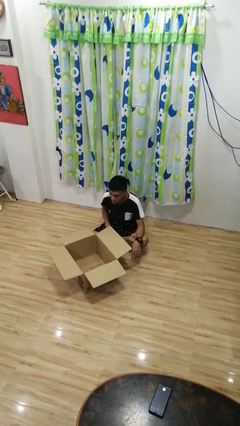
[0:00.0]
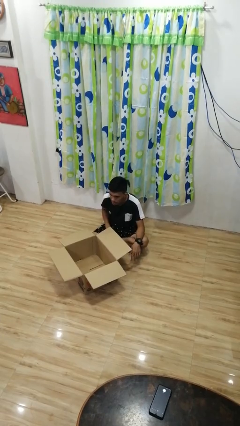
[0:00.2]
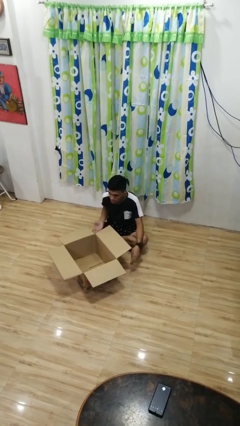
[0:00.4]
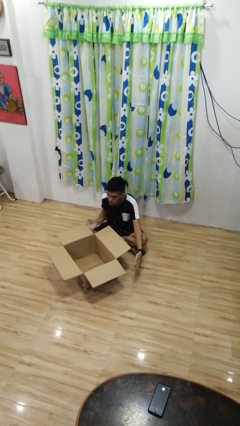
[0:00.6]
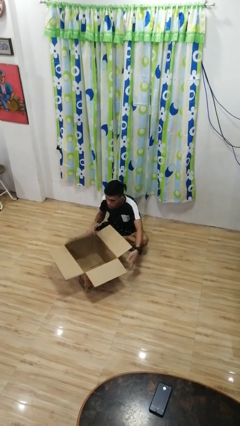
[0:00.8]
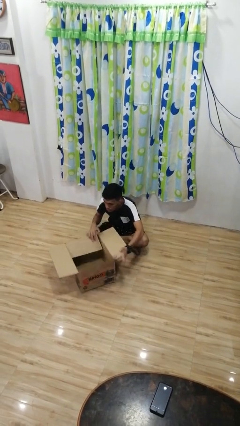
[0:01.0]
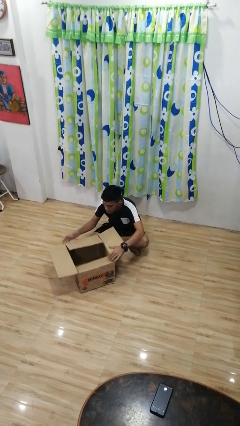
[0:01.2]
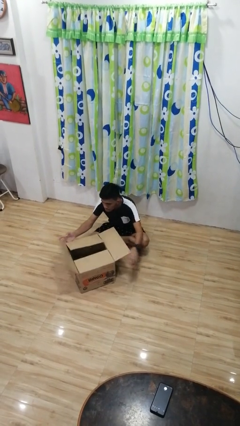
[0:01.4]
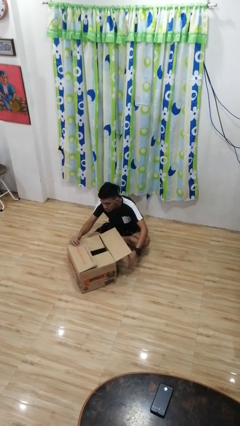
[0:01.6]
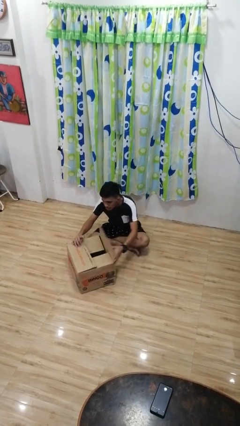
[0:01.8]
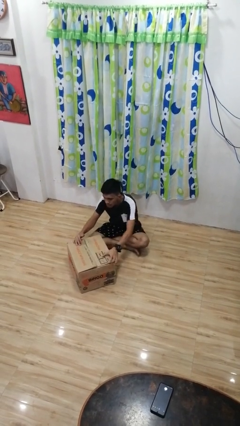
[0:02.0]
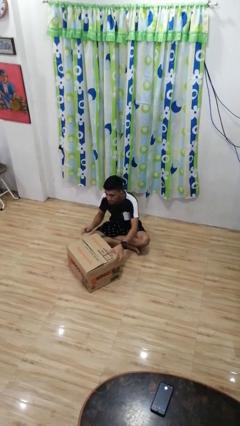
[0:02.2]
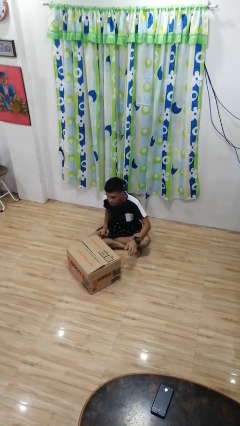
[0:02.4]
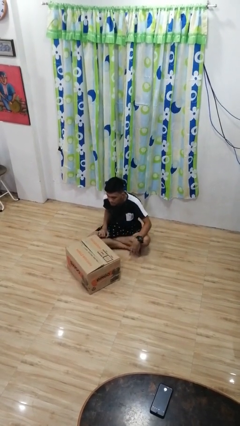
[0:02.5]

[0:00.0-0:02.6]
person closes box

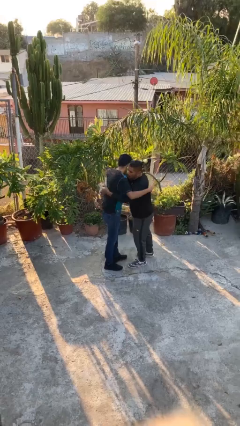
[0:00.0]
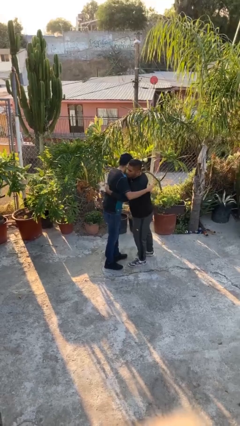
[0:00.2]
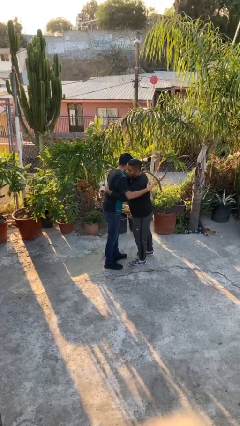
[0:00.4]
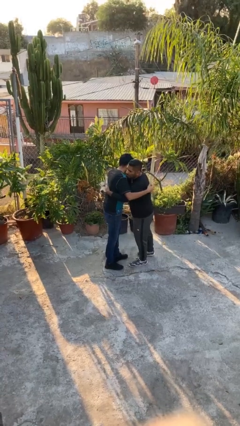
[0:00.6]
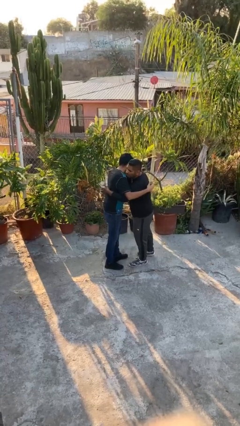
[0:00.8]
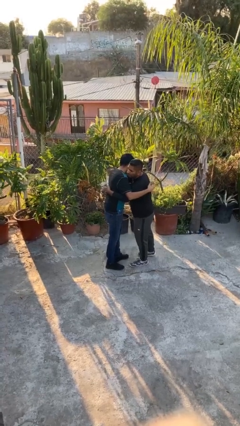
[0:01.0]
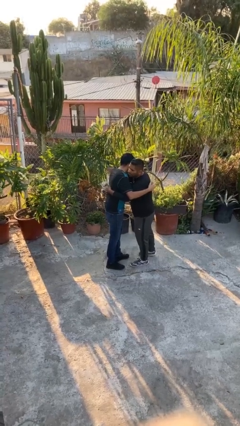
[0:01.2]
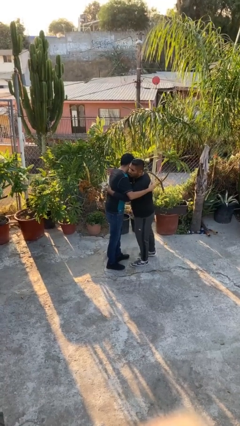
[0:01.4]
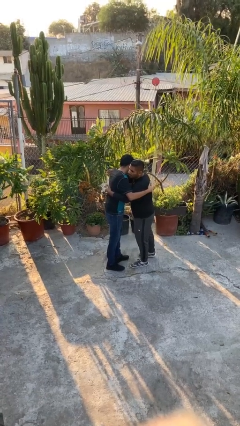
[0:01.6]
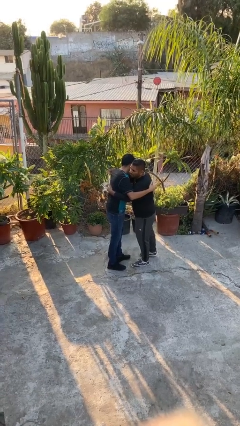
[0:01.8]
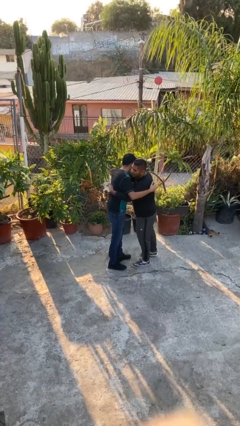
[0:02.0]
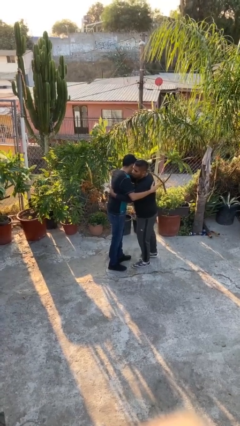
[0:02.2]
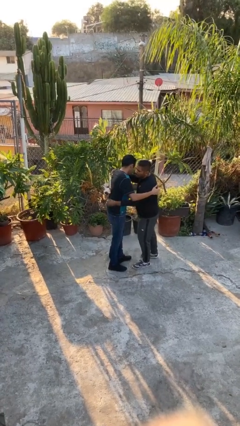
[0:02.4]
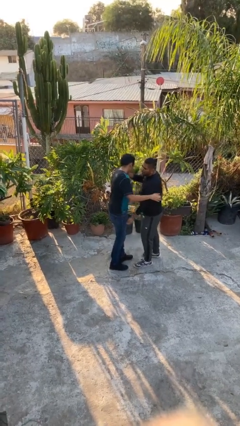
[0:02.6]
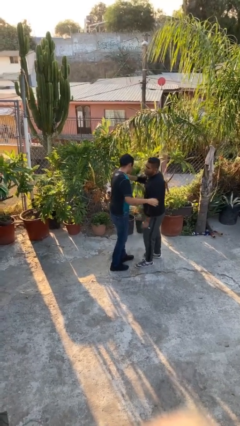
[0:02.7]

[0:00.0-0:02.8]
person embraces person

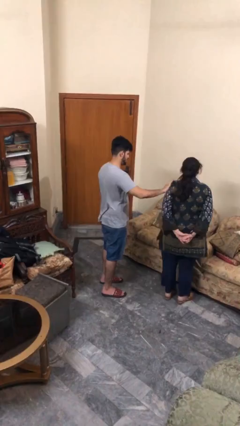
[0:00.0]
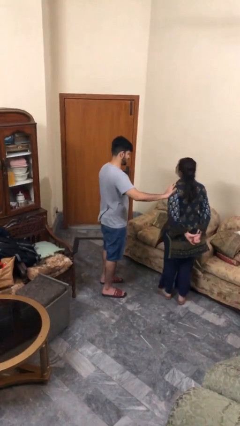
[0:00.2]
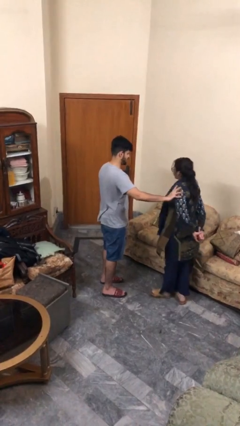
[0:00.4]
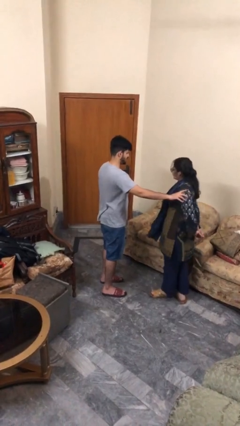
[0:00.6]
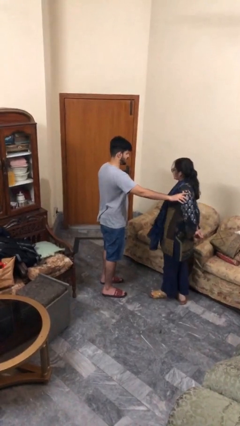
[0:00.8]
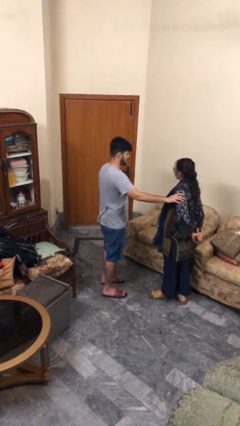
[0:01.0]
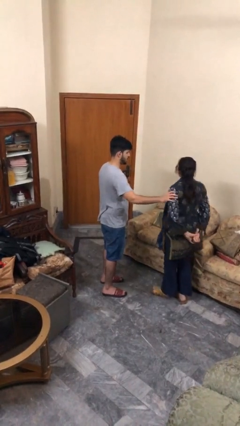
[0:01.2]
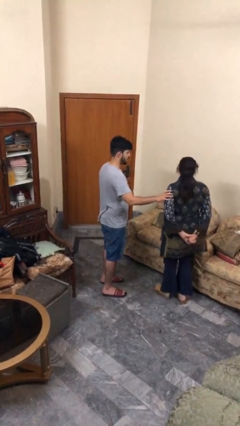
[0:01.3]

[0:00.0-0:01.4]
person spins person around

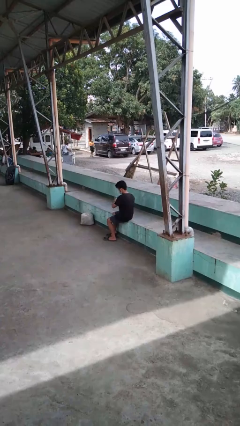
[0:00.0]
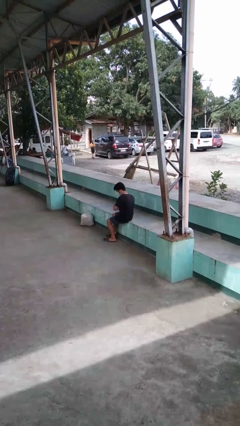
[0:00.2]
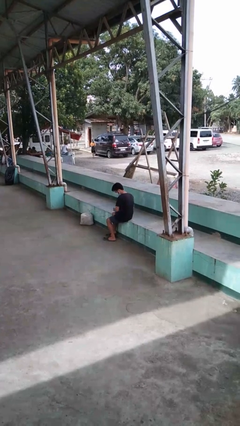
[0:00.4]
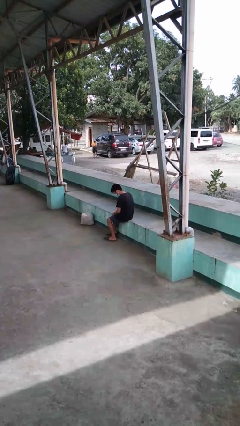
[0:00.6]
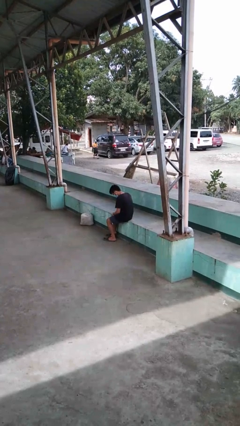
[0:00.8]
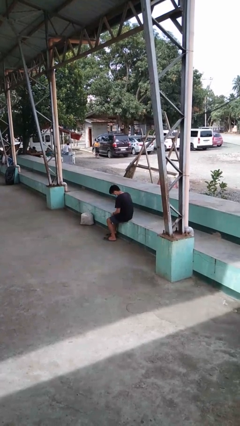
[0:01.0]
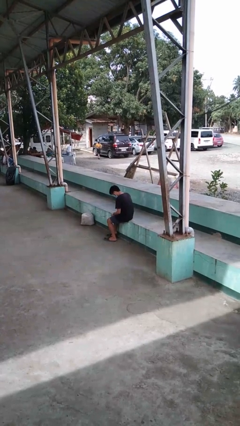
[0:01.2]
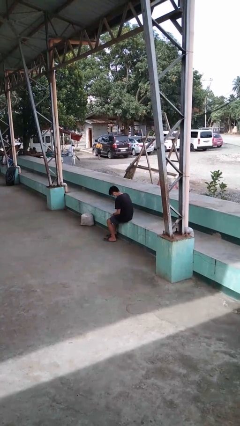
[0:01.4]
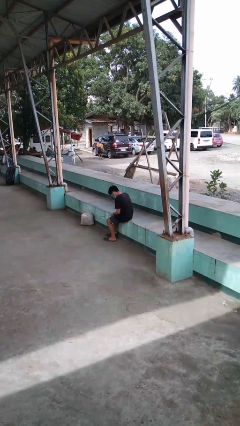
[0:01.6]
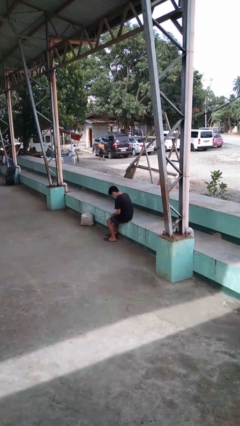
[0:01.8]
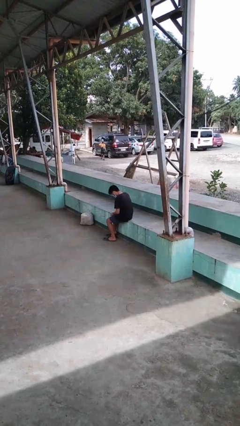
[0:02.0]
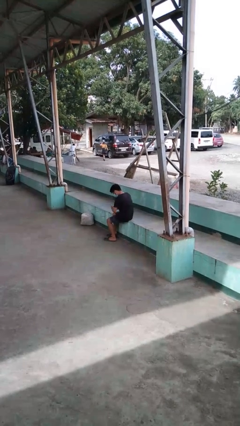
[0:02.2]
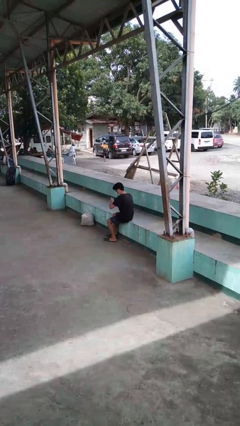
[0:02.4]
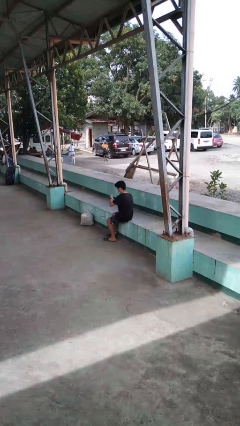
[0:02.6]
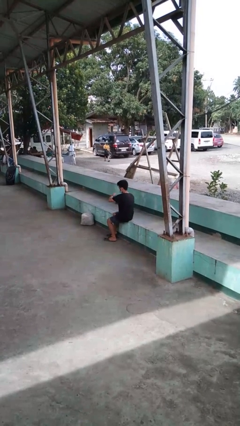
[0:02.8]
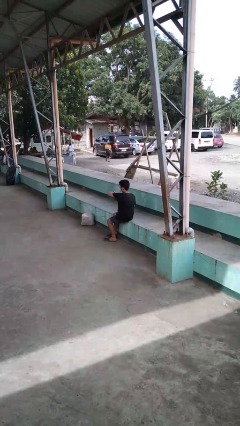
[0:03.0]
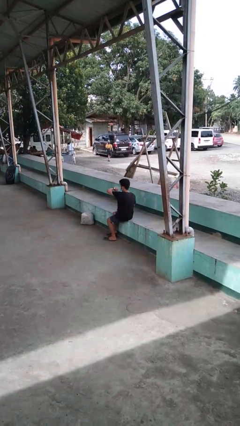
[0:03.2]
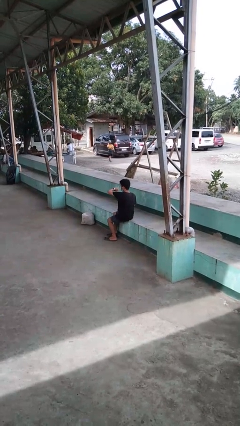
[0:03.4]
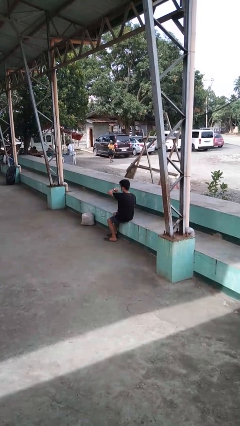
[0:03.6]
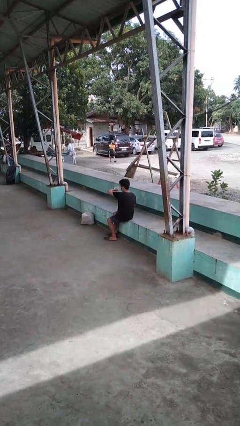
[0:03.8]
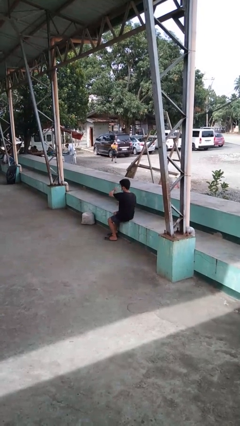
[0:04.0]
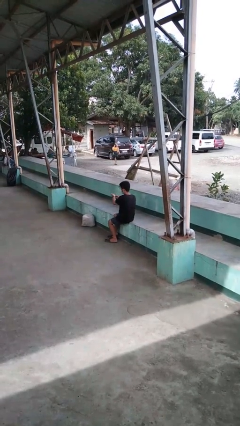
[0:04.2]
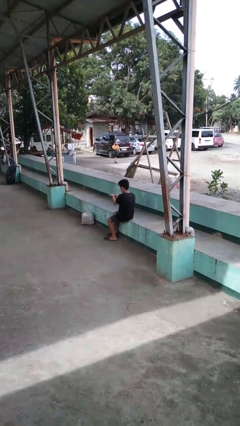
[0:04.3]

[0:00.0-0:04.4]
person puts on wristwatch

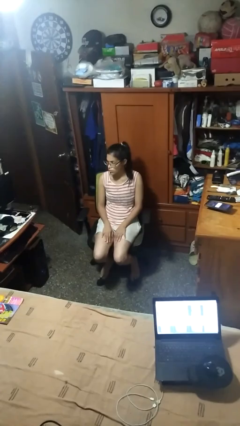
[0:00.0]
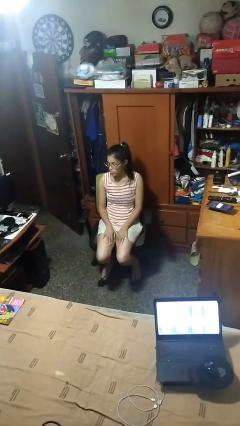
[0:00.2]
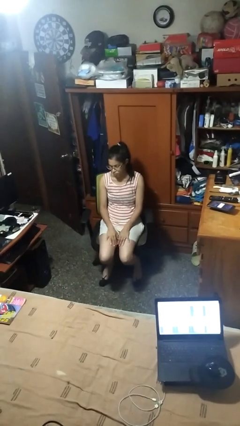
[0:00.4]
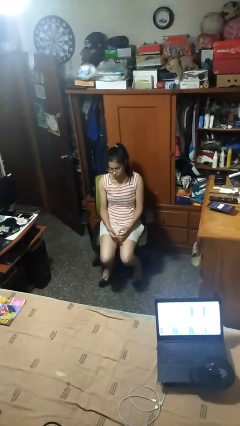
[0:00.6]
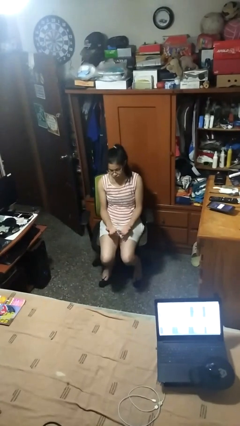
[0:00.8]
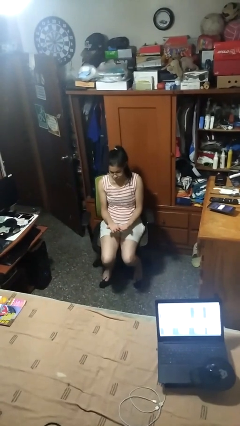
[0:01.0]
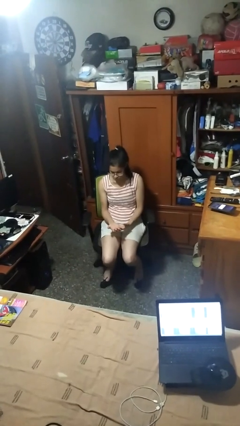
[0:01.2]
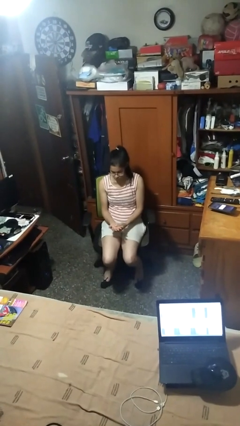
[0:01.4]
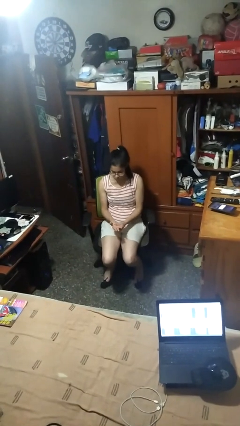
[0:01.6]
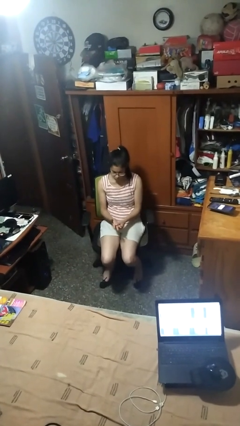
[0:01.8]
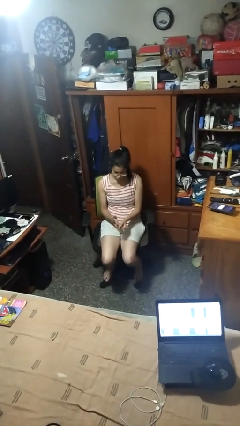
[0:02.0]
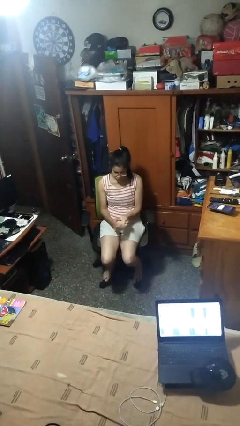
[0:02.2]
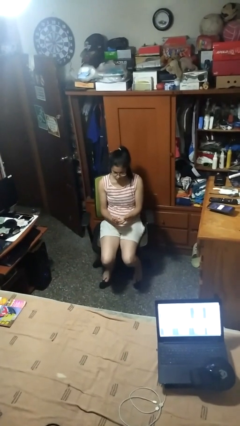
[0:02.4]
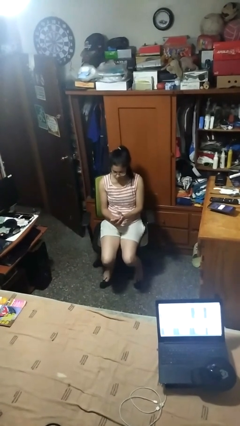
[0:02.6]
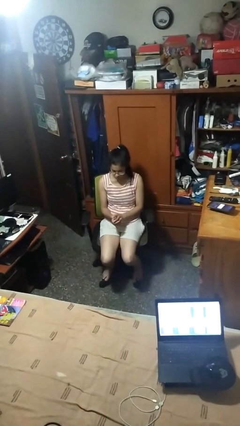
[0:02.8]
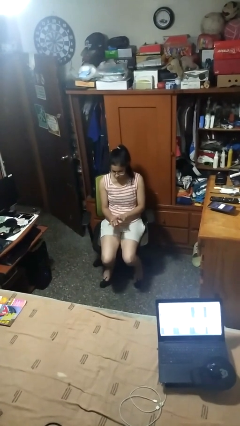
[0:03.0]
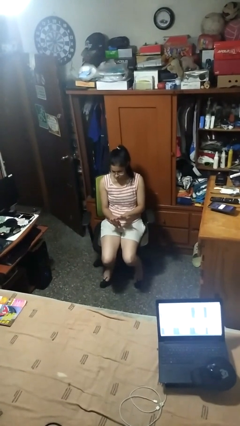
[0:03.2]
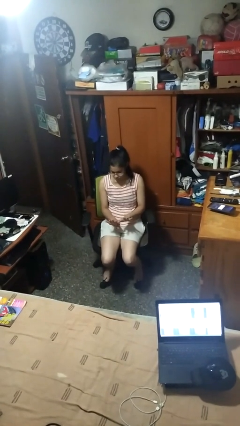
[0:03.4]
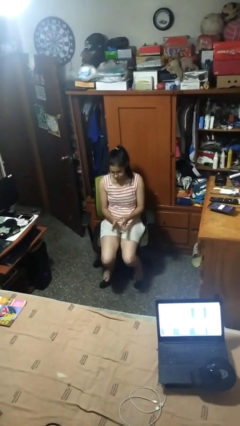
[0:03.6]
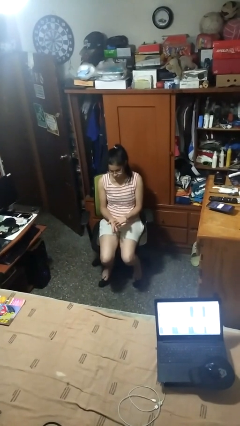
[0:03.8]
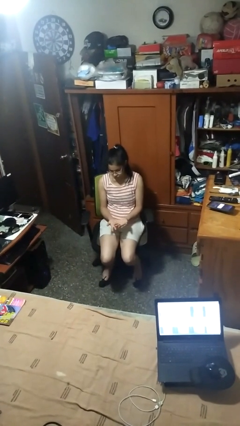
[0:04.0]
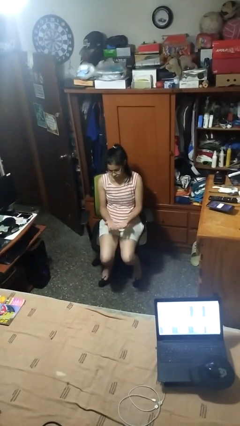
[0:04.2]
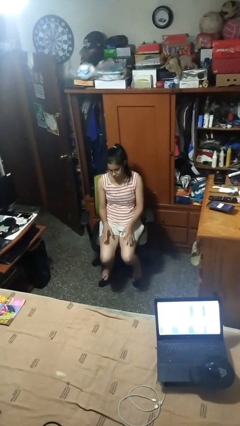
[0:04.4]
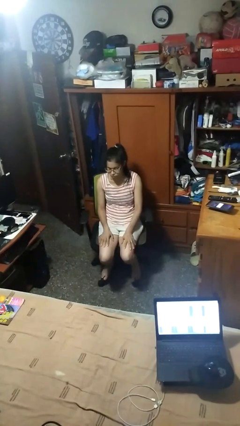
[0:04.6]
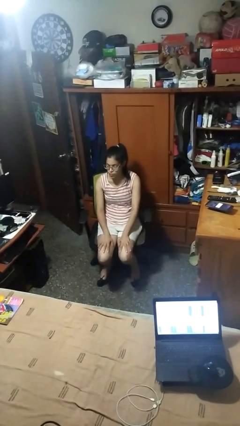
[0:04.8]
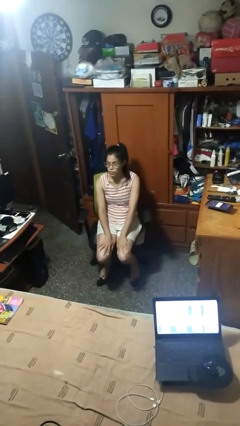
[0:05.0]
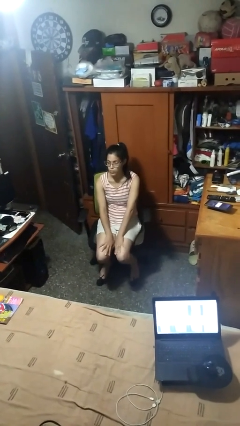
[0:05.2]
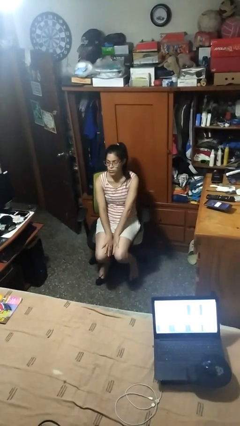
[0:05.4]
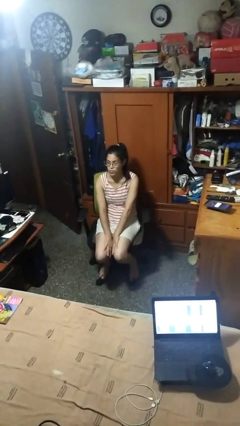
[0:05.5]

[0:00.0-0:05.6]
person looks at hands in lap

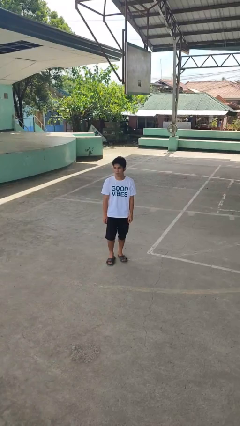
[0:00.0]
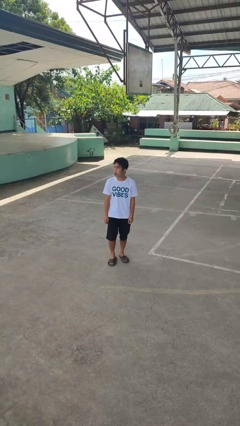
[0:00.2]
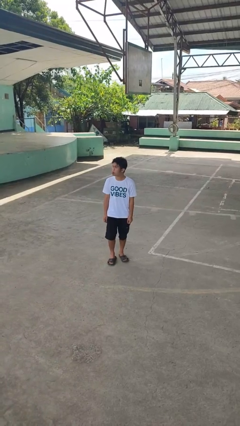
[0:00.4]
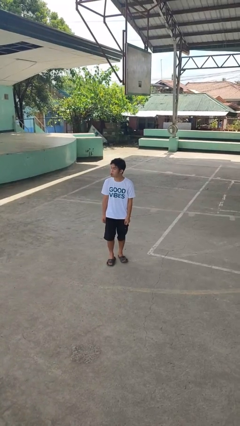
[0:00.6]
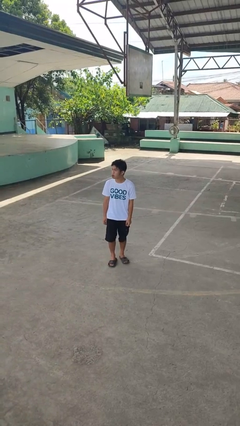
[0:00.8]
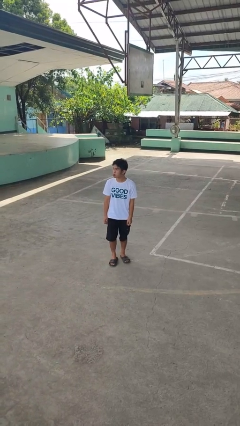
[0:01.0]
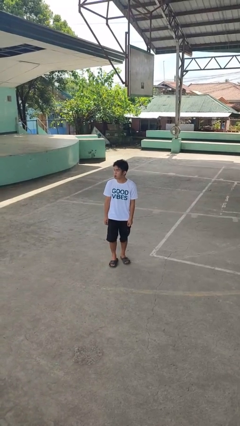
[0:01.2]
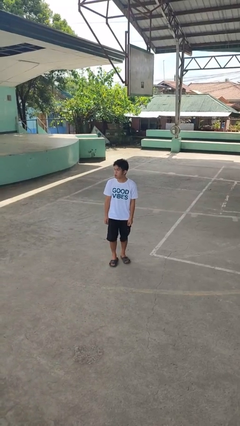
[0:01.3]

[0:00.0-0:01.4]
person sticks out tongue
